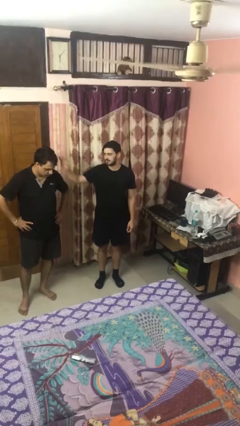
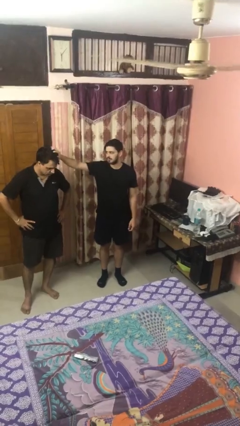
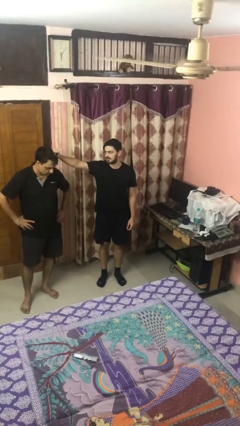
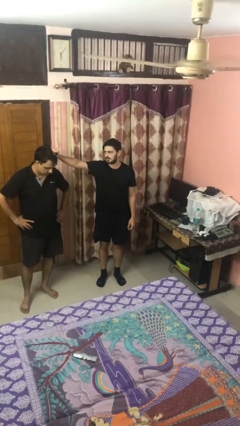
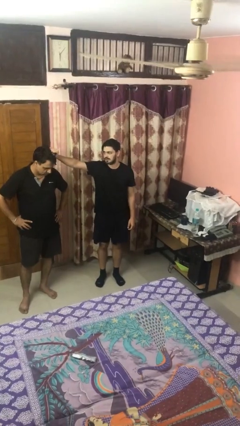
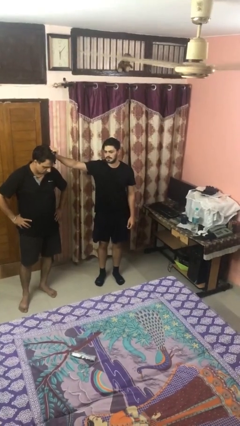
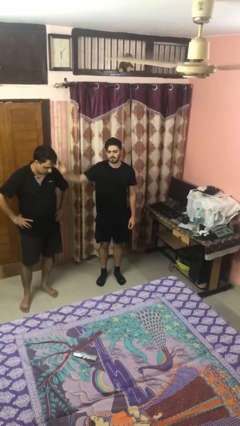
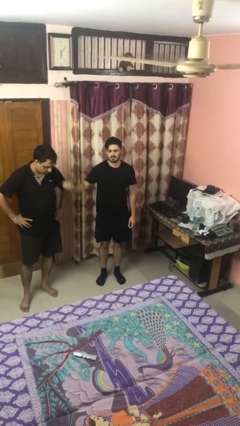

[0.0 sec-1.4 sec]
person grabs person by hair

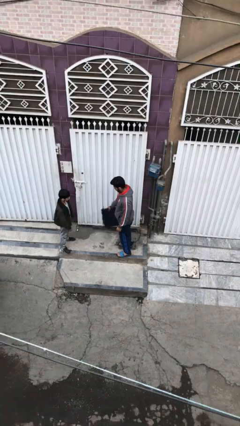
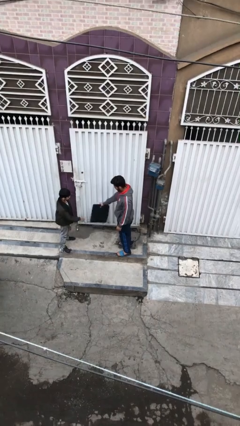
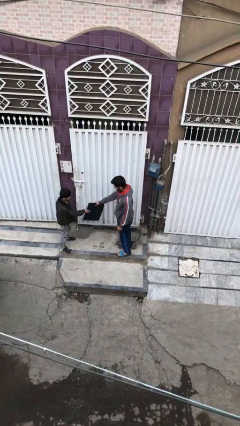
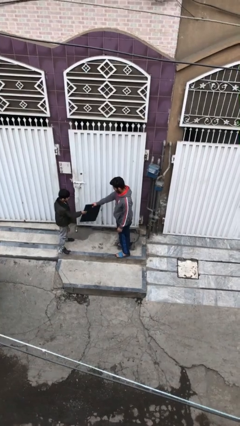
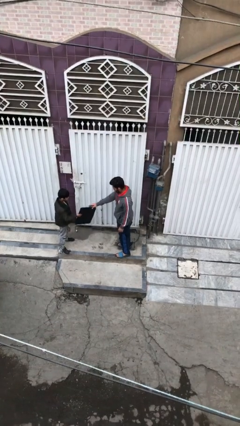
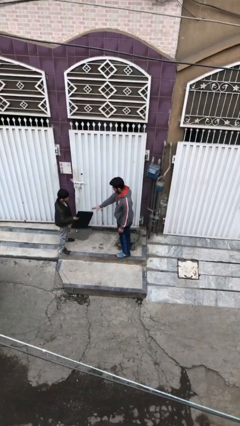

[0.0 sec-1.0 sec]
person transfers object to person

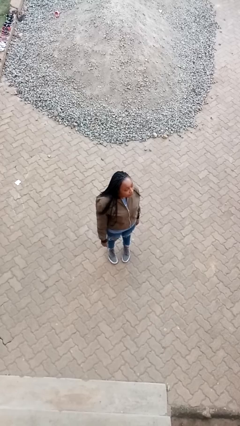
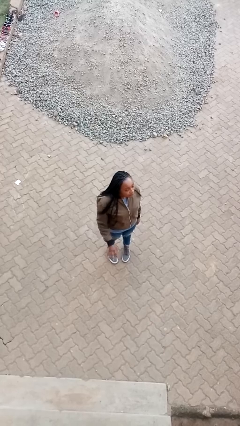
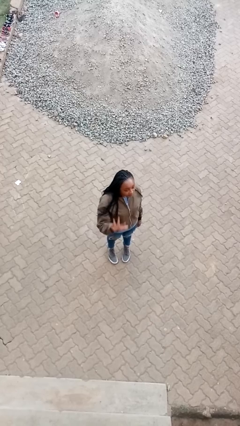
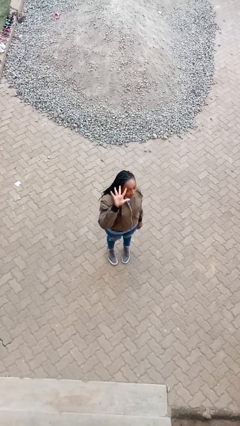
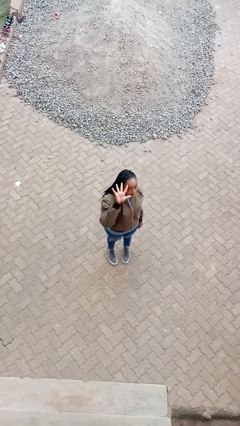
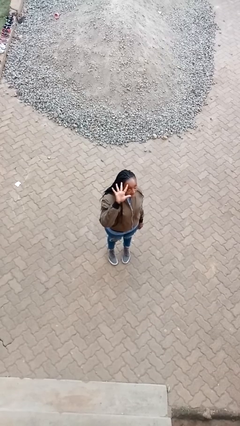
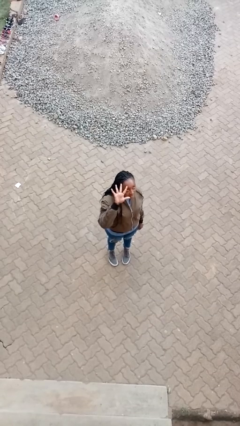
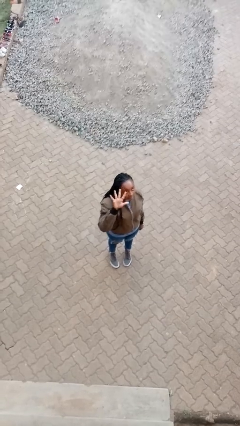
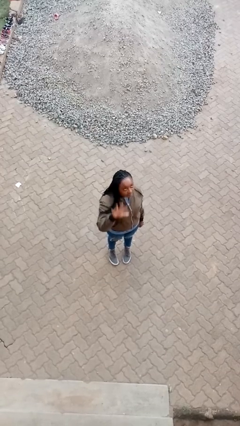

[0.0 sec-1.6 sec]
person gestures number five

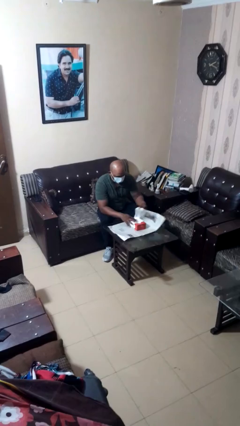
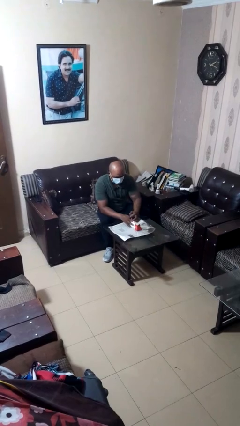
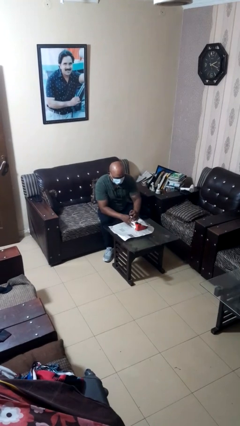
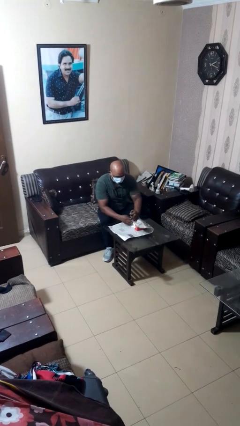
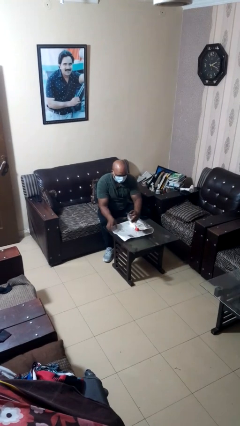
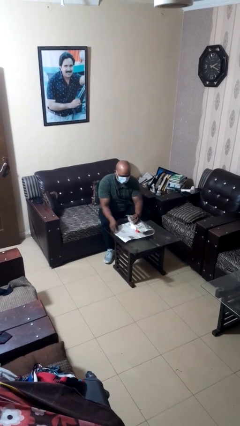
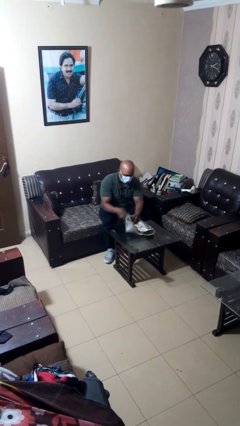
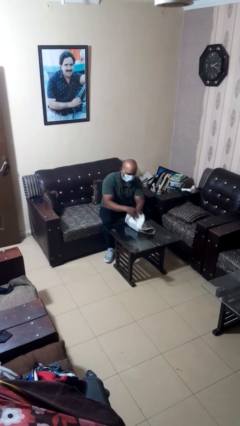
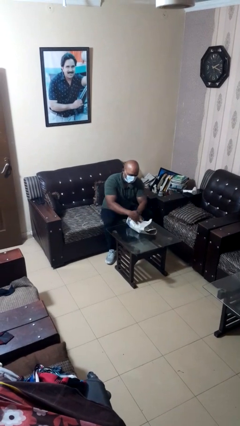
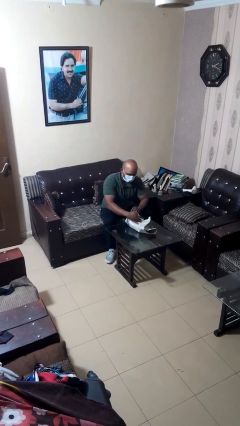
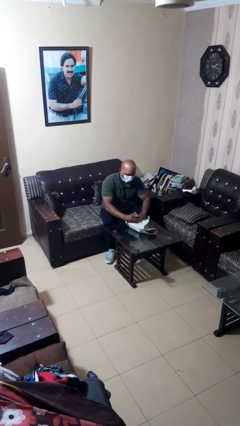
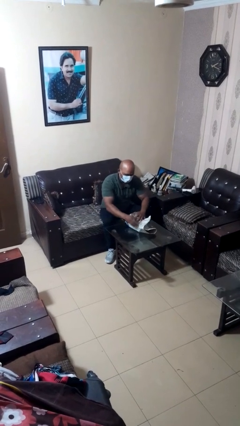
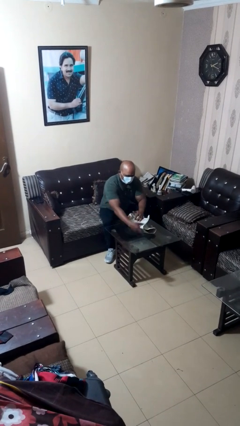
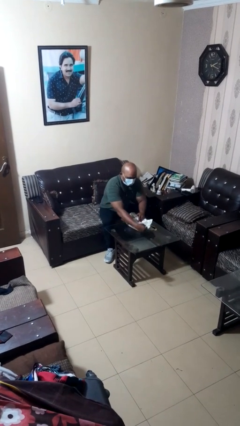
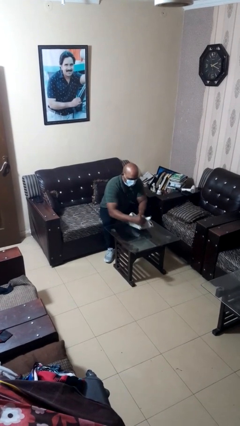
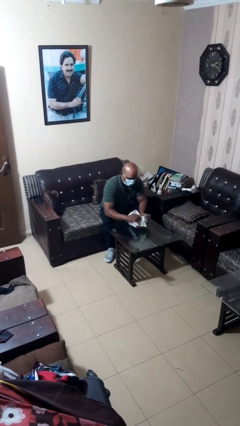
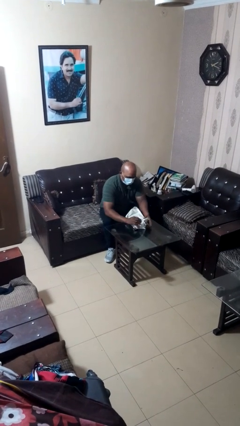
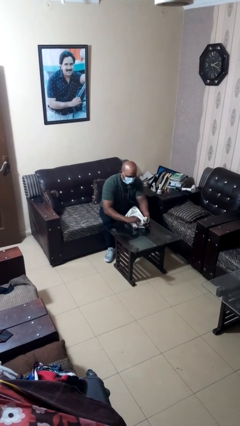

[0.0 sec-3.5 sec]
person wraps box

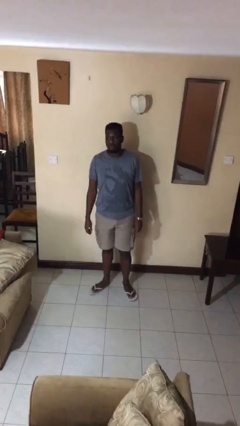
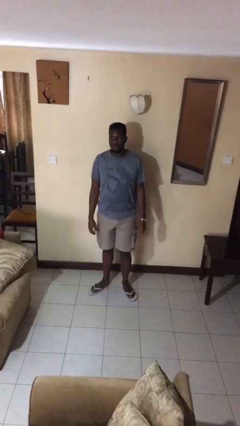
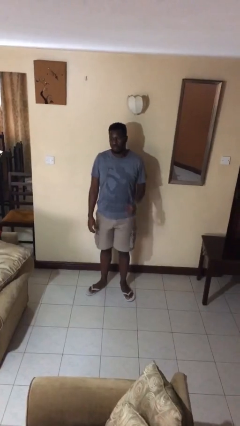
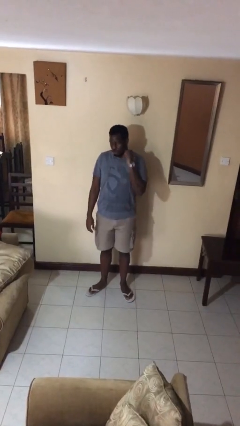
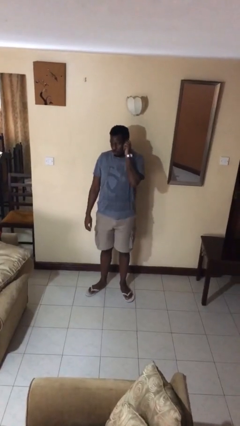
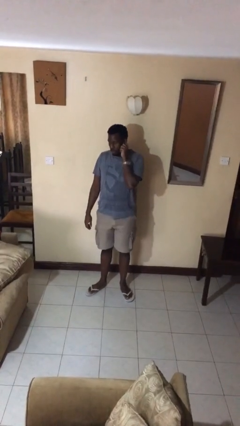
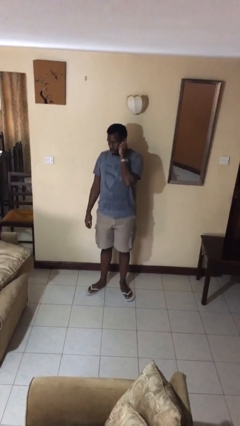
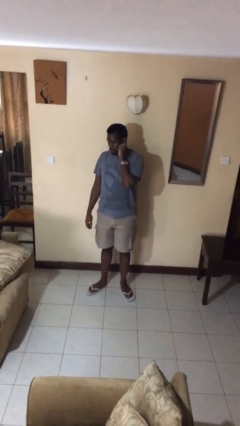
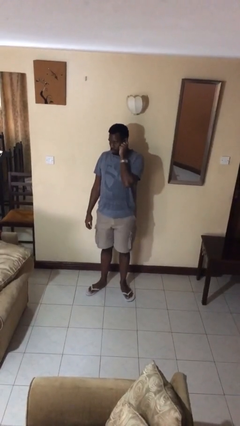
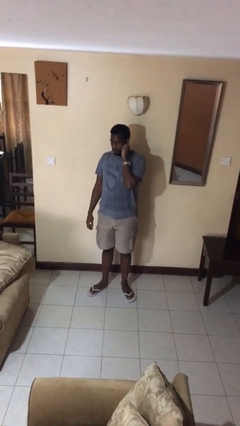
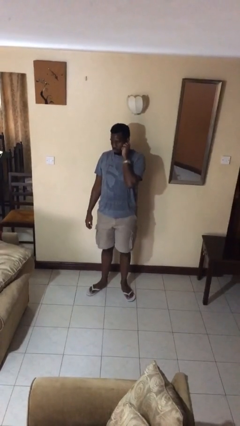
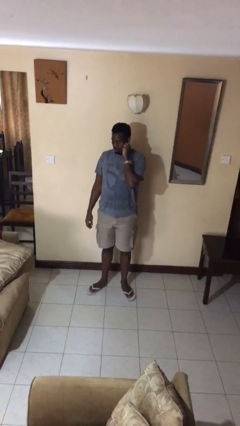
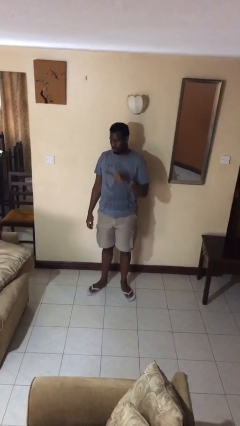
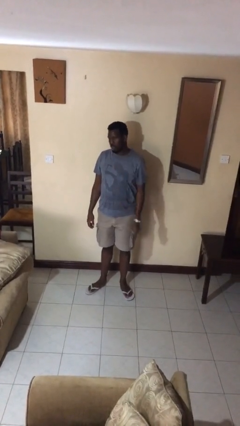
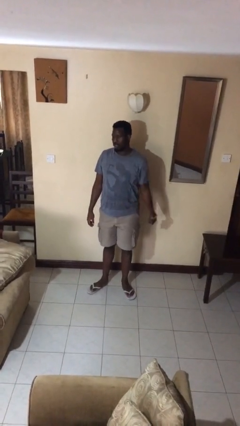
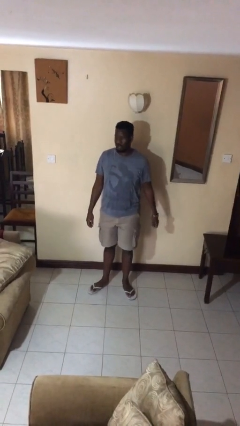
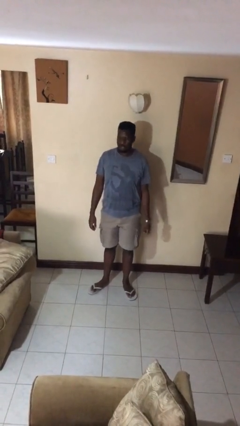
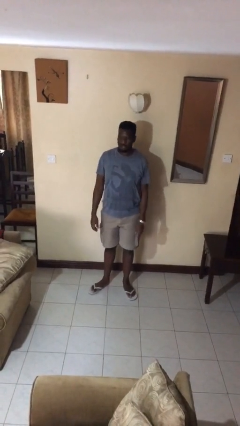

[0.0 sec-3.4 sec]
person touches earlobe

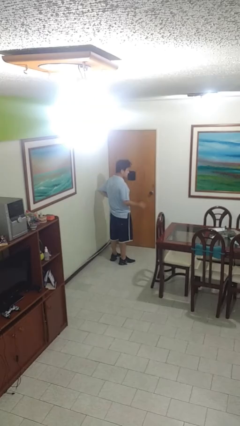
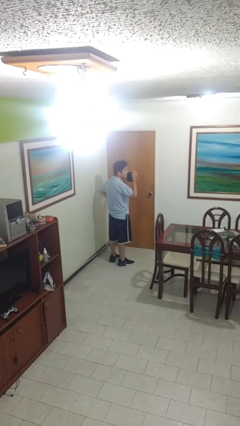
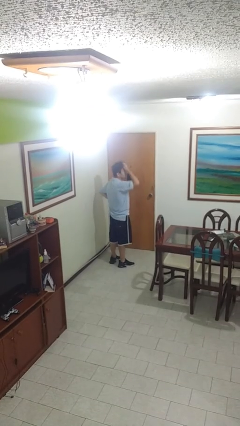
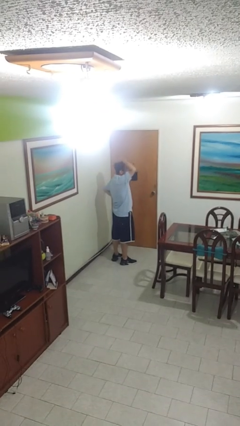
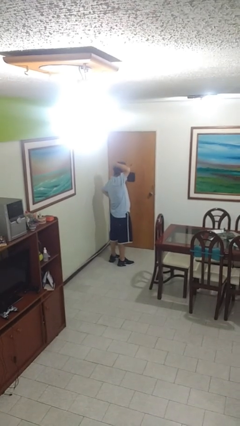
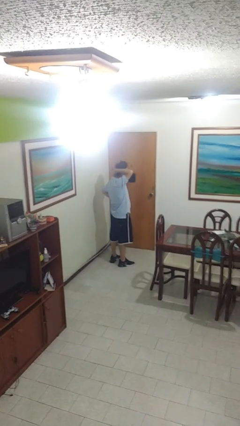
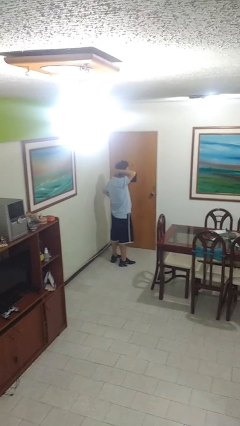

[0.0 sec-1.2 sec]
person strokes hair

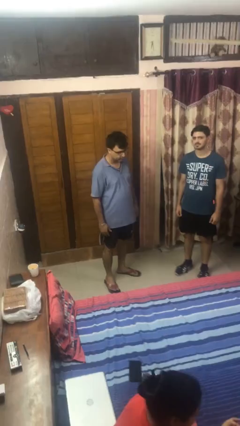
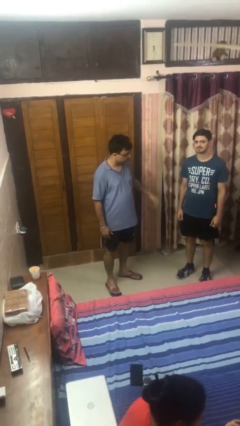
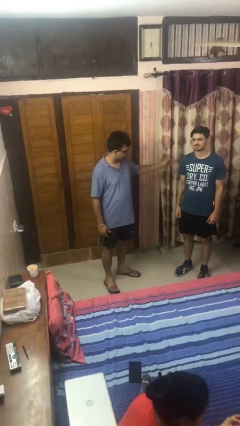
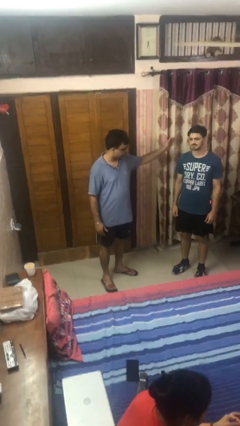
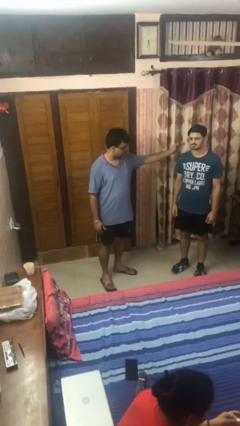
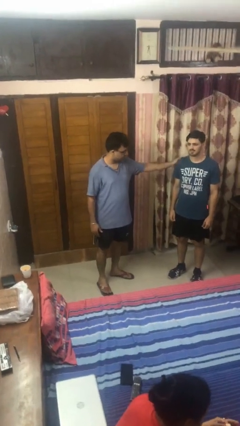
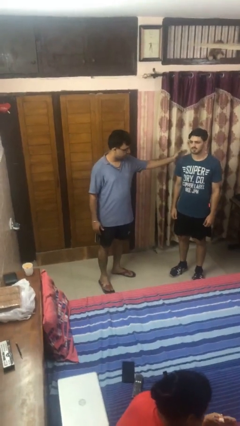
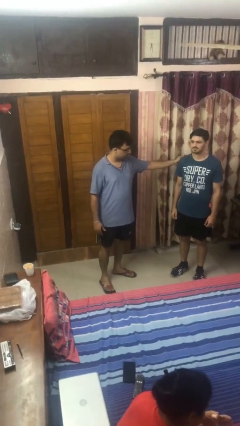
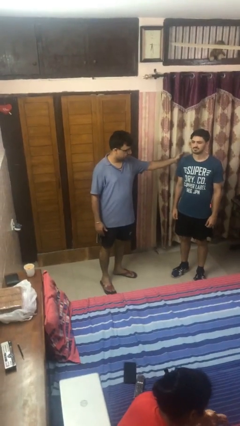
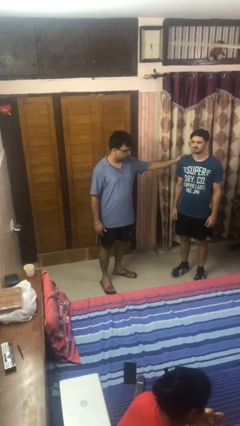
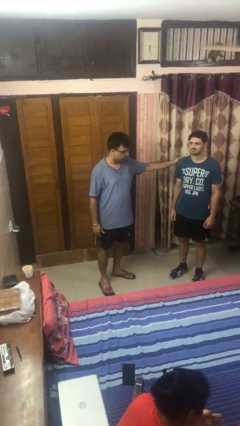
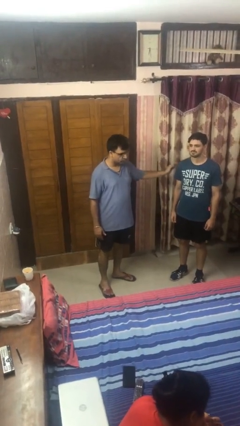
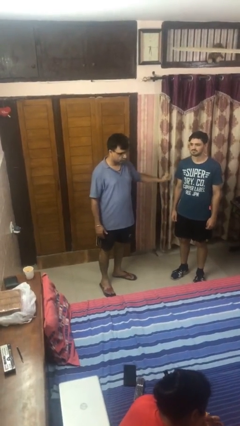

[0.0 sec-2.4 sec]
person pounds shoulders of person

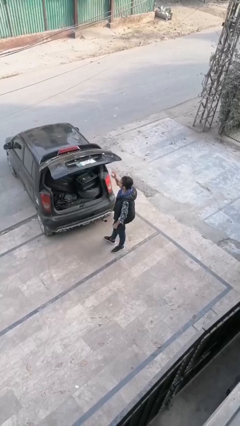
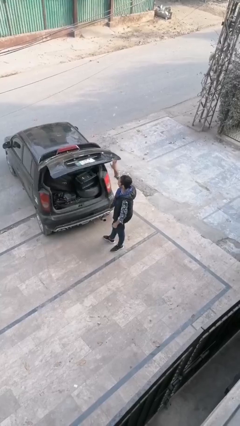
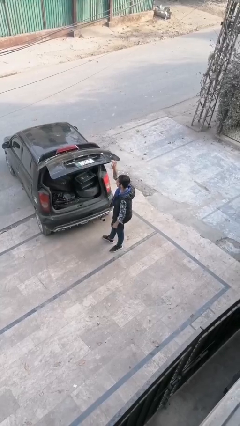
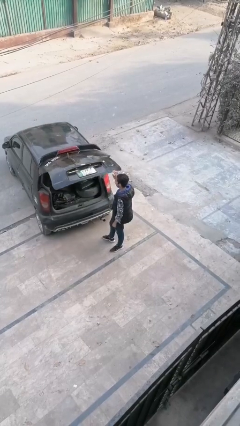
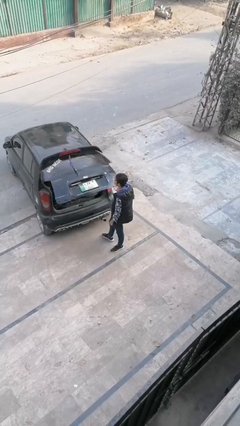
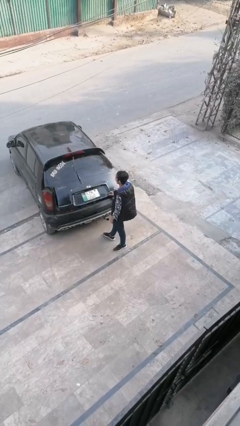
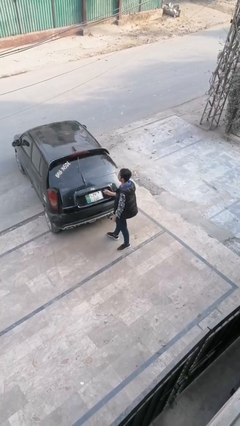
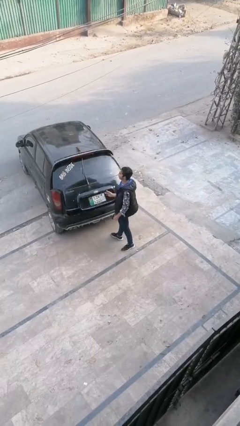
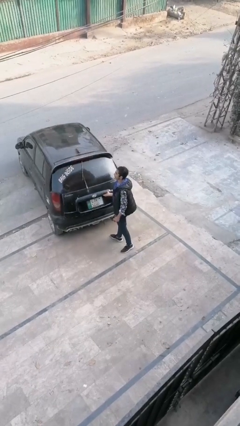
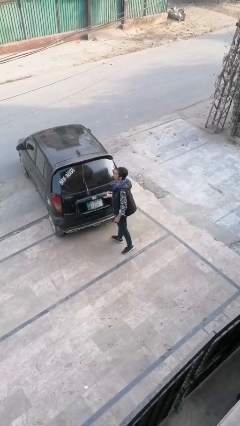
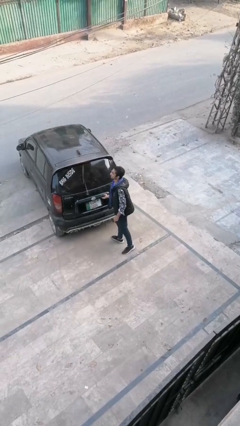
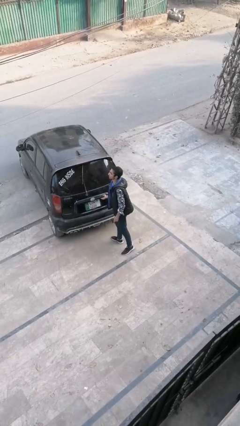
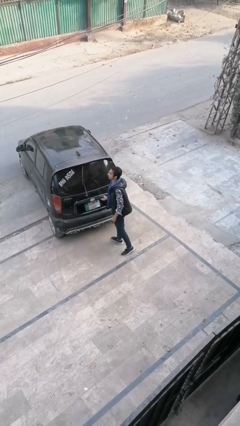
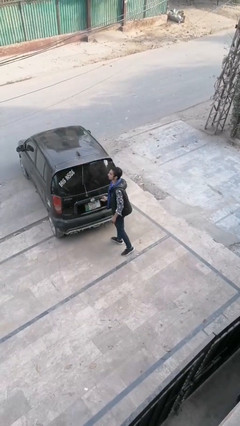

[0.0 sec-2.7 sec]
person closes car trunk
